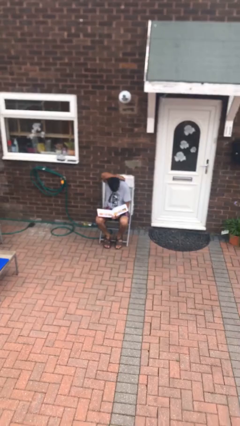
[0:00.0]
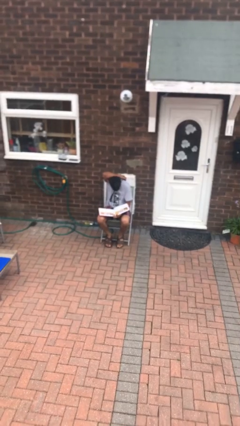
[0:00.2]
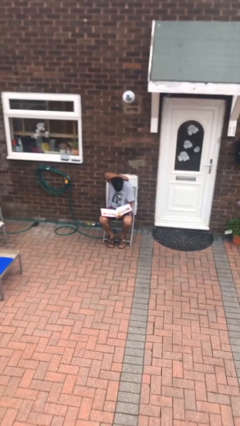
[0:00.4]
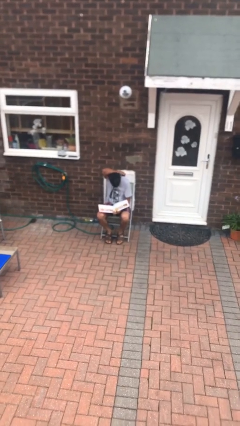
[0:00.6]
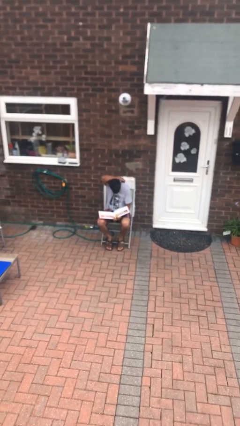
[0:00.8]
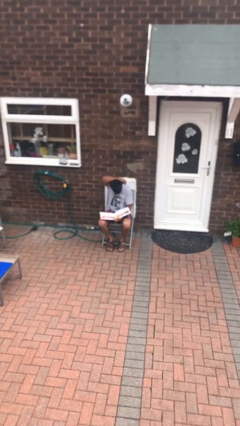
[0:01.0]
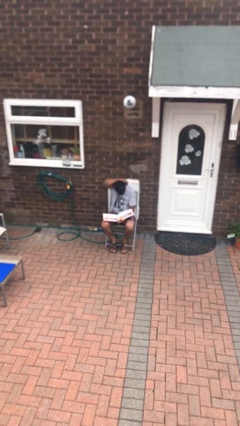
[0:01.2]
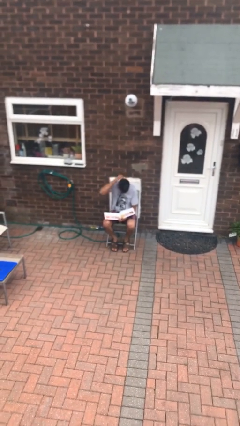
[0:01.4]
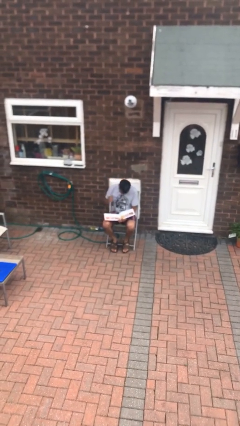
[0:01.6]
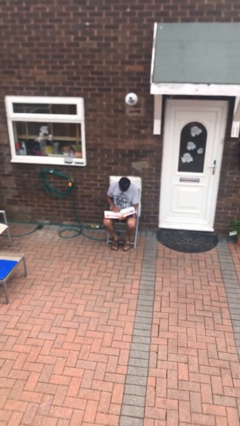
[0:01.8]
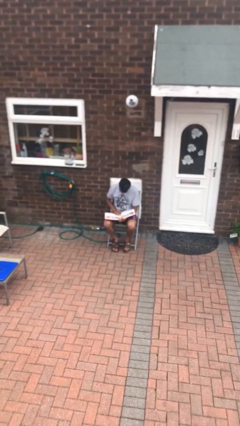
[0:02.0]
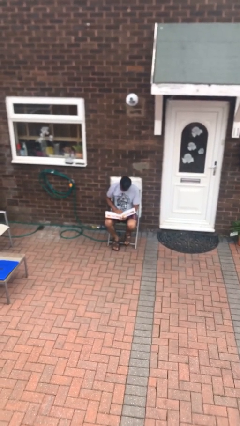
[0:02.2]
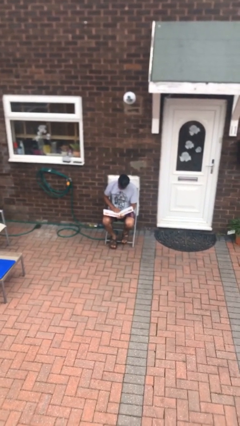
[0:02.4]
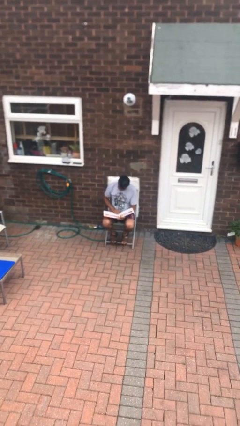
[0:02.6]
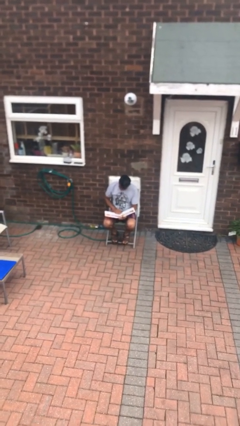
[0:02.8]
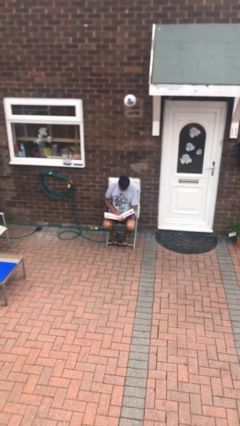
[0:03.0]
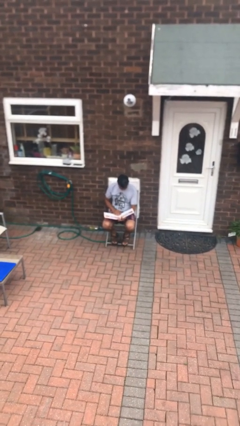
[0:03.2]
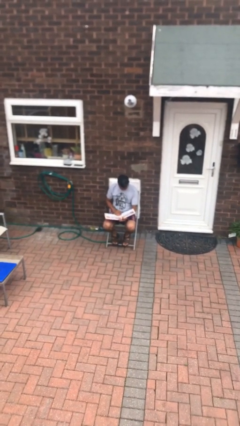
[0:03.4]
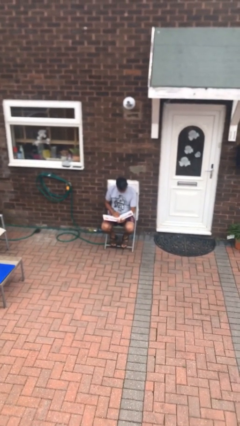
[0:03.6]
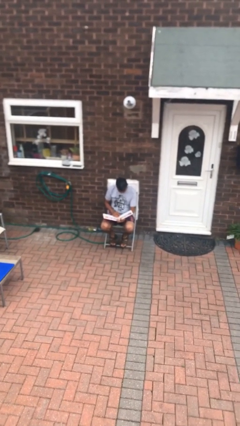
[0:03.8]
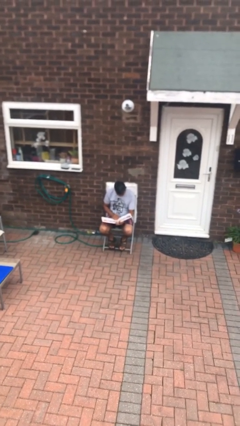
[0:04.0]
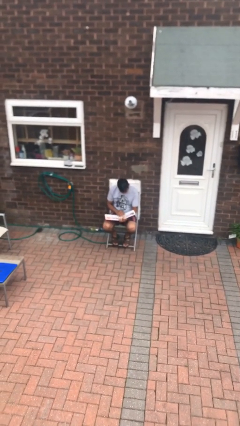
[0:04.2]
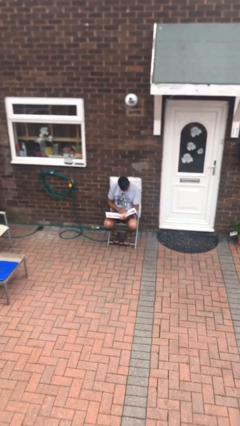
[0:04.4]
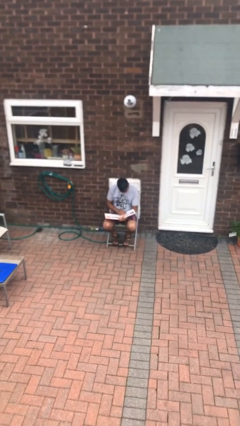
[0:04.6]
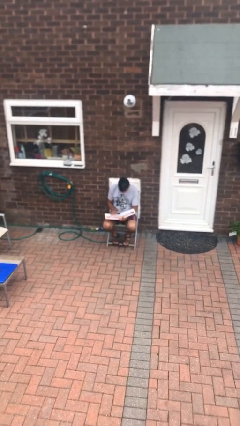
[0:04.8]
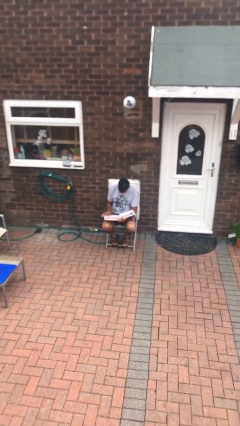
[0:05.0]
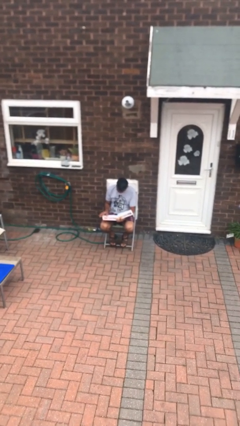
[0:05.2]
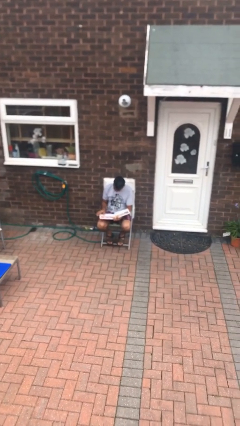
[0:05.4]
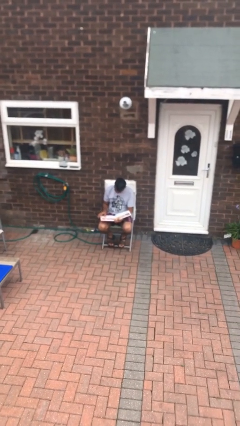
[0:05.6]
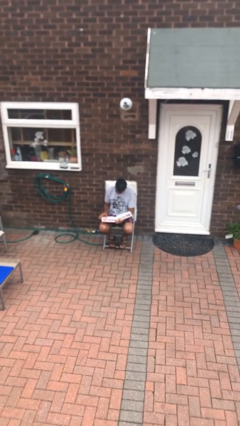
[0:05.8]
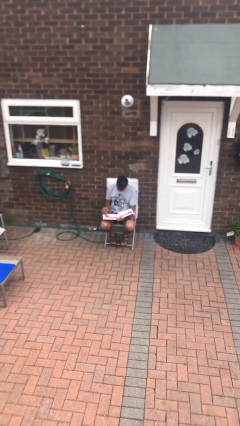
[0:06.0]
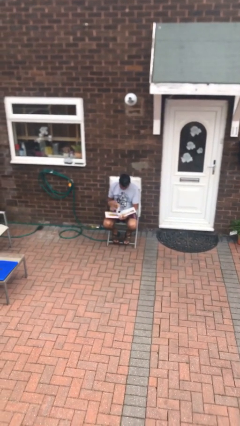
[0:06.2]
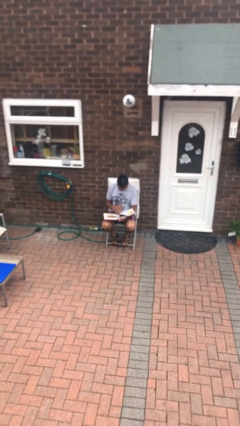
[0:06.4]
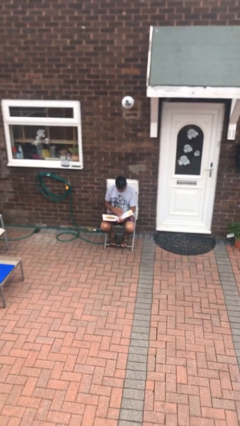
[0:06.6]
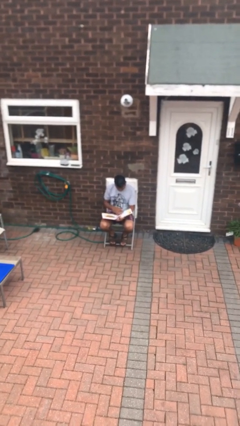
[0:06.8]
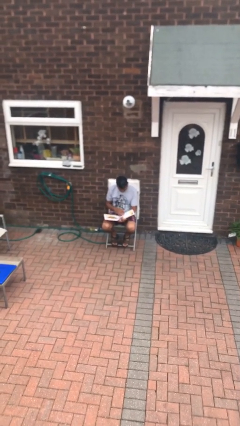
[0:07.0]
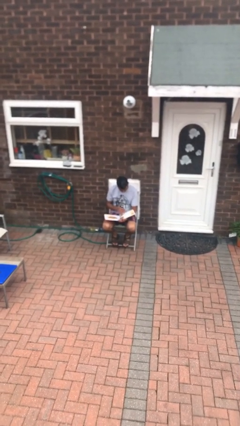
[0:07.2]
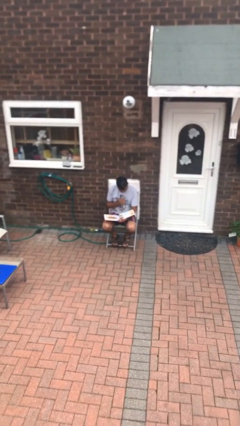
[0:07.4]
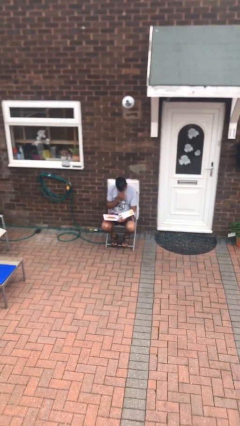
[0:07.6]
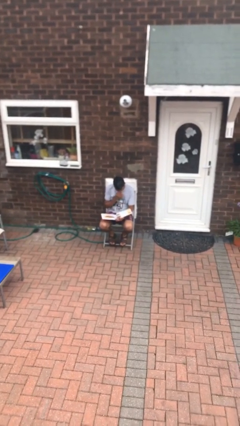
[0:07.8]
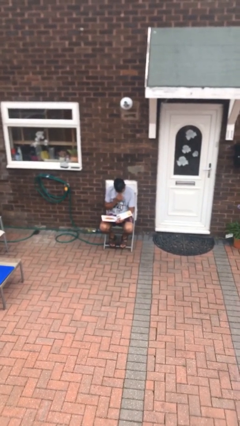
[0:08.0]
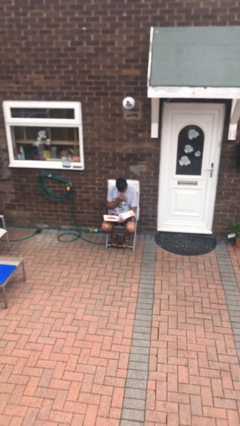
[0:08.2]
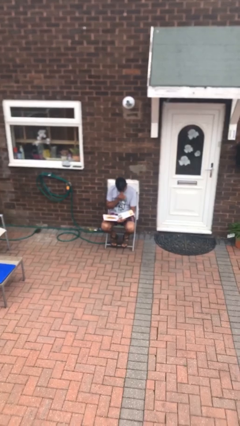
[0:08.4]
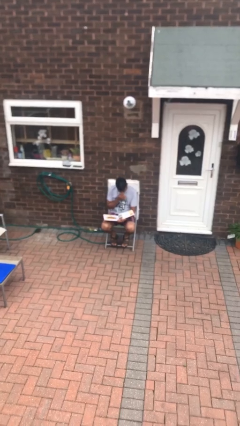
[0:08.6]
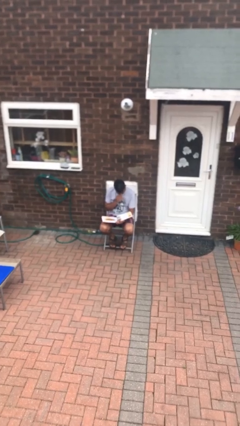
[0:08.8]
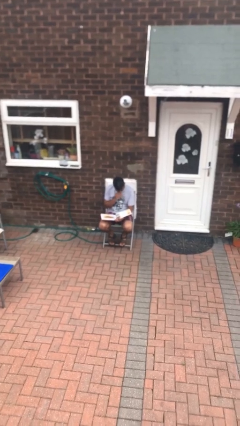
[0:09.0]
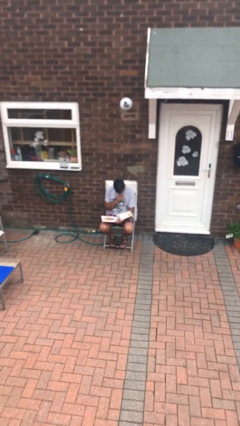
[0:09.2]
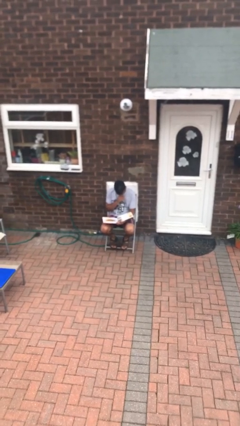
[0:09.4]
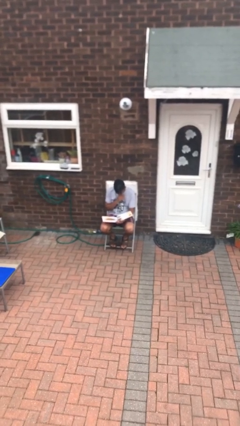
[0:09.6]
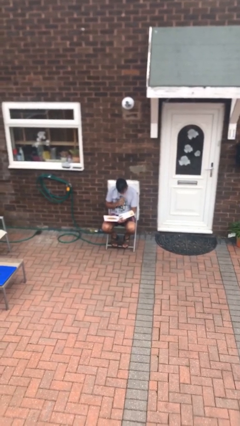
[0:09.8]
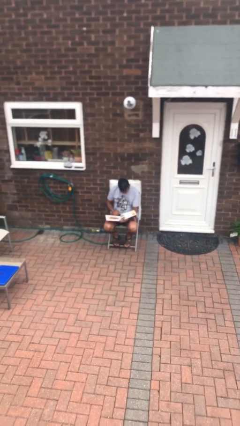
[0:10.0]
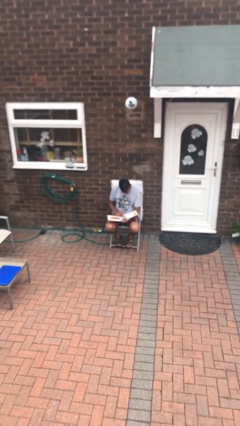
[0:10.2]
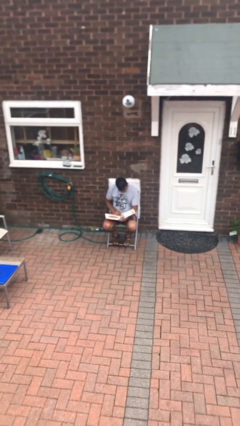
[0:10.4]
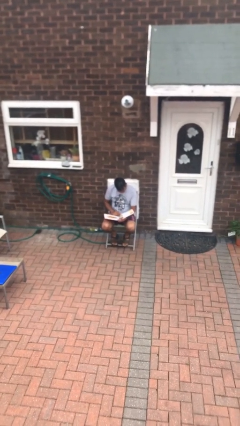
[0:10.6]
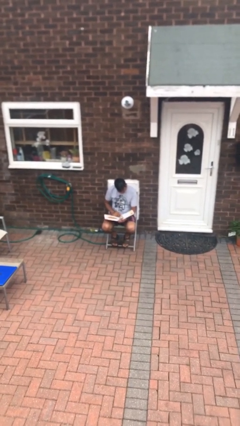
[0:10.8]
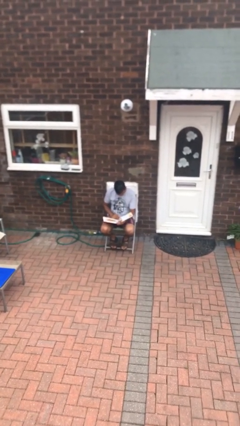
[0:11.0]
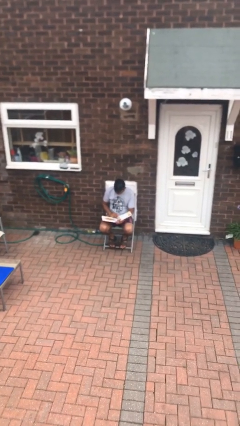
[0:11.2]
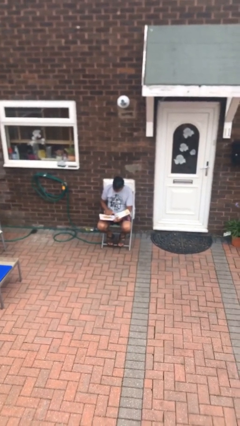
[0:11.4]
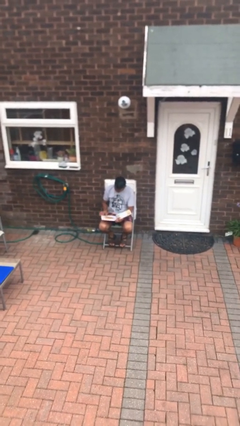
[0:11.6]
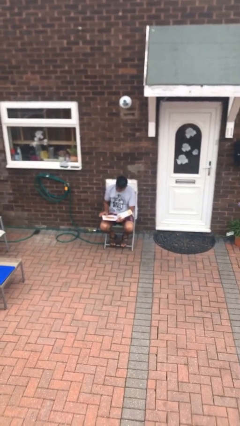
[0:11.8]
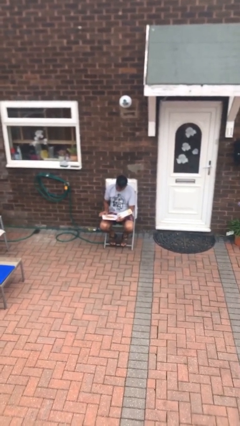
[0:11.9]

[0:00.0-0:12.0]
person reads document

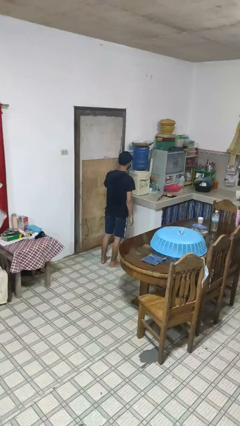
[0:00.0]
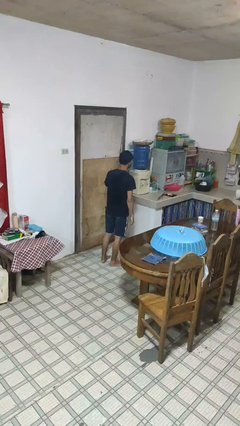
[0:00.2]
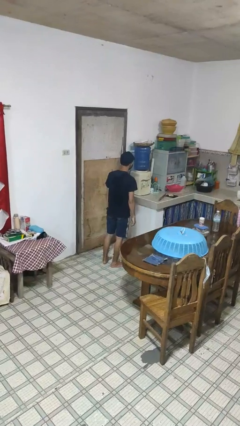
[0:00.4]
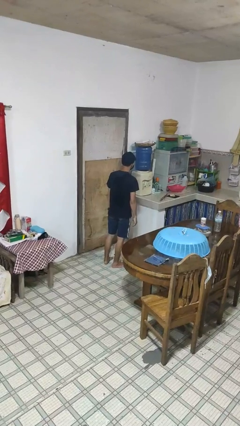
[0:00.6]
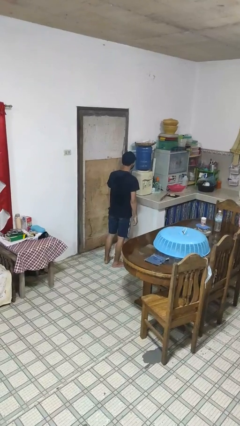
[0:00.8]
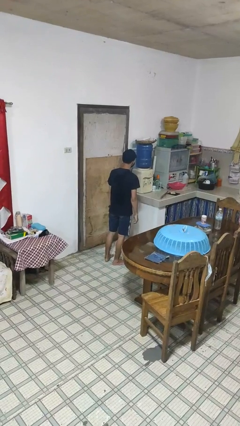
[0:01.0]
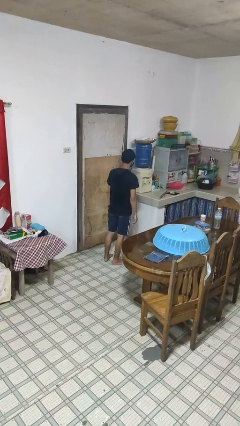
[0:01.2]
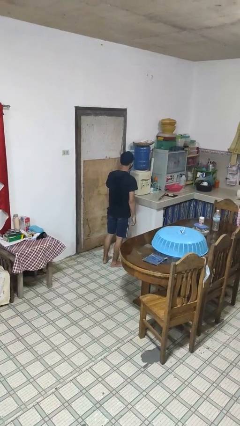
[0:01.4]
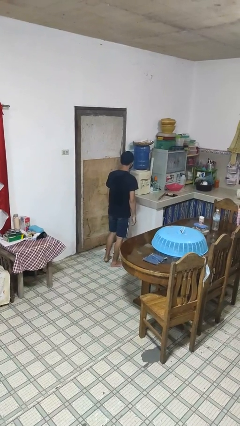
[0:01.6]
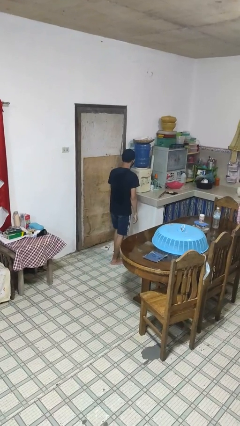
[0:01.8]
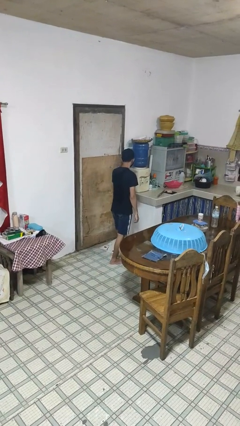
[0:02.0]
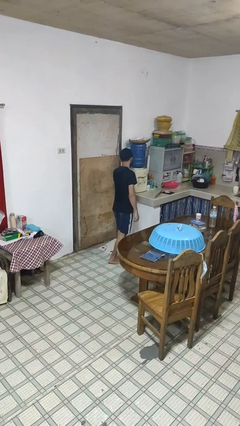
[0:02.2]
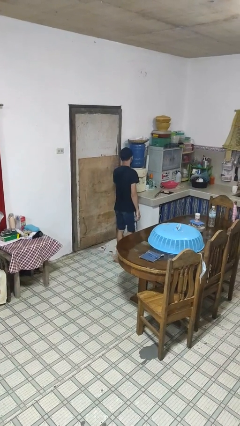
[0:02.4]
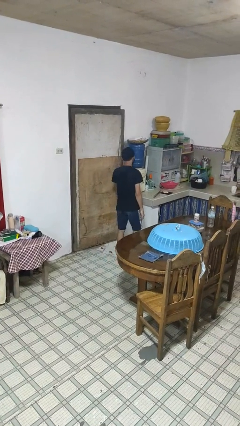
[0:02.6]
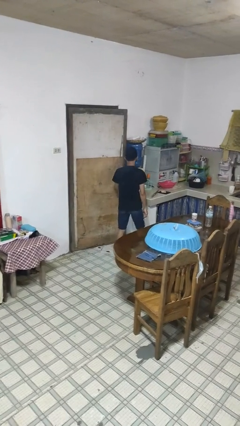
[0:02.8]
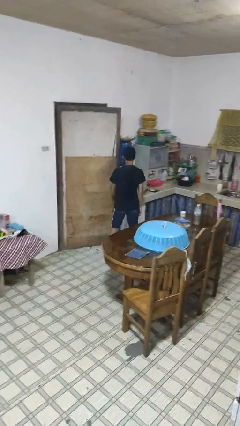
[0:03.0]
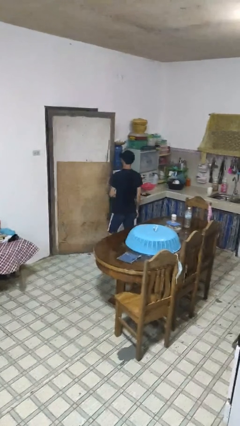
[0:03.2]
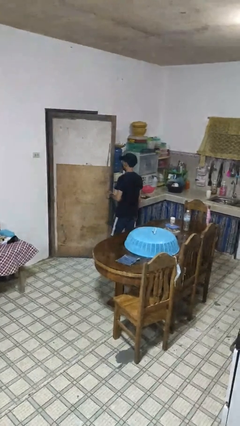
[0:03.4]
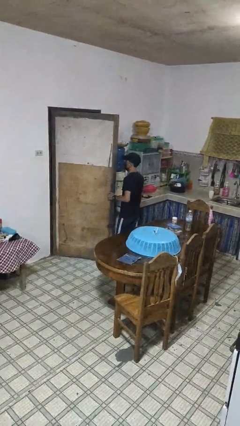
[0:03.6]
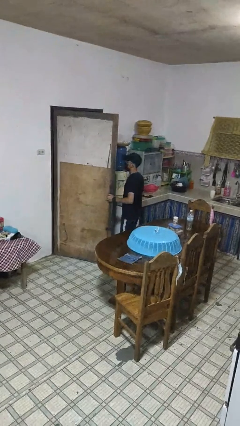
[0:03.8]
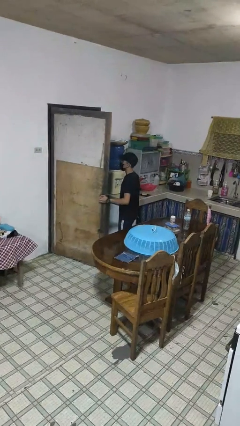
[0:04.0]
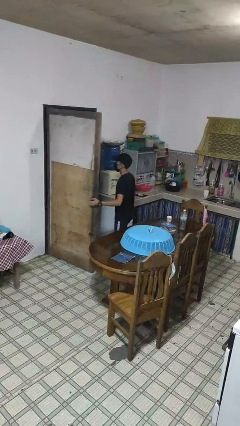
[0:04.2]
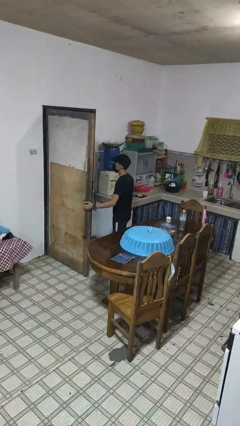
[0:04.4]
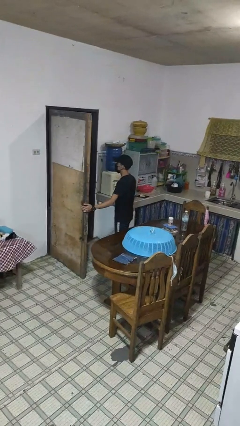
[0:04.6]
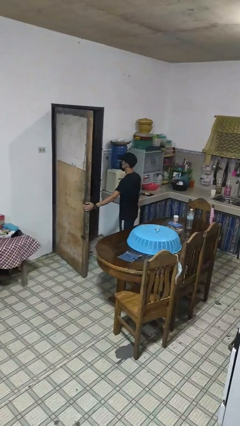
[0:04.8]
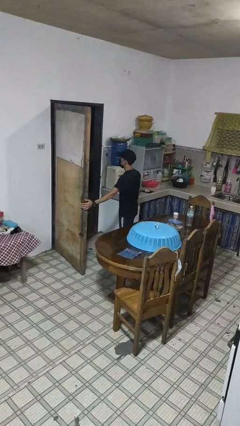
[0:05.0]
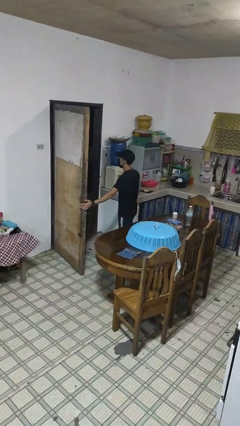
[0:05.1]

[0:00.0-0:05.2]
person opens facility door

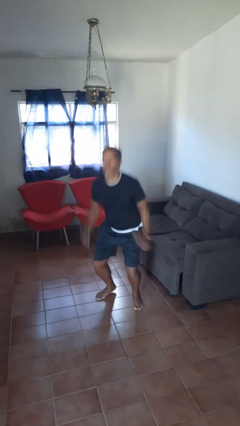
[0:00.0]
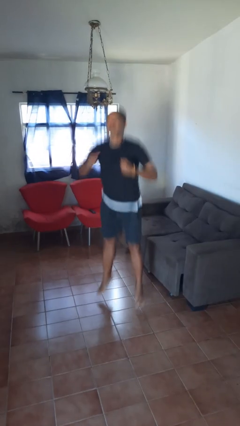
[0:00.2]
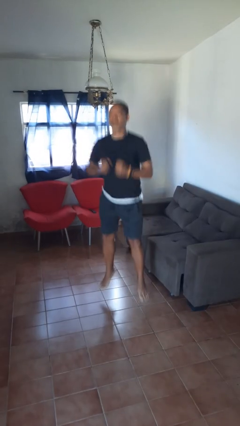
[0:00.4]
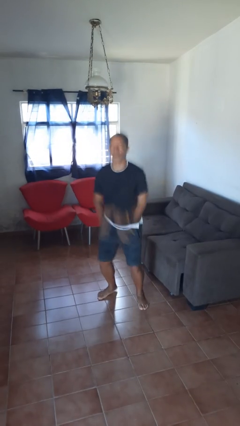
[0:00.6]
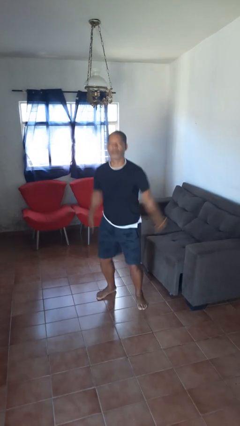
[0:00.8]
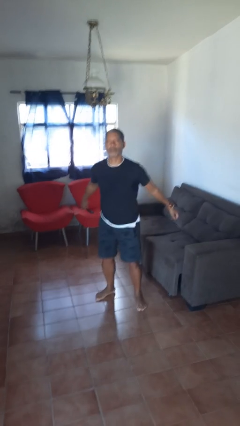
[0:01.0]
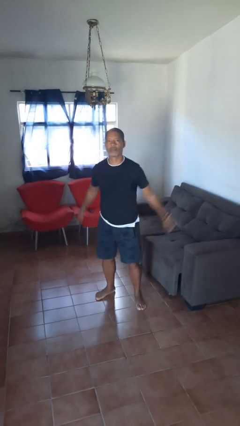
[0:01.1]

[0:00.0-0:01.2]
person jumps
